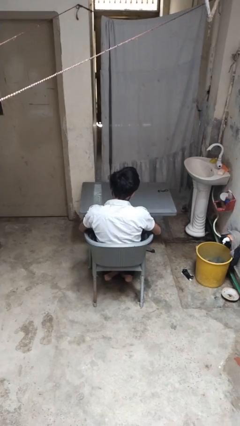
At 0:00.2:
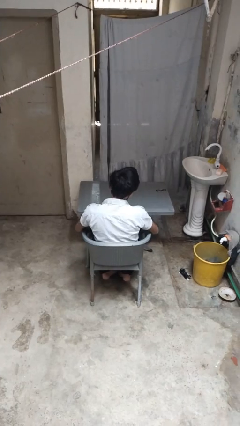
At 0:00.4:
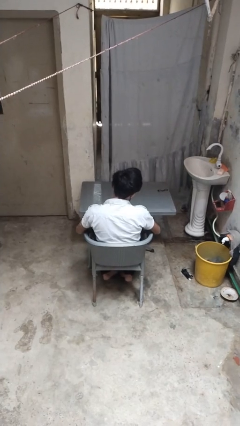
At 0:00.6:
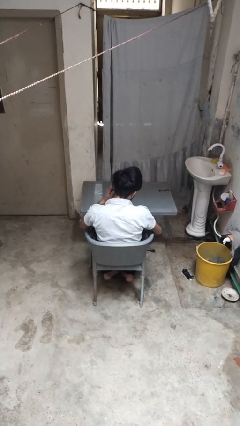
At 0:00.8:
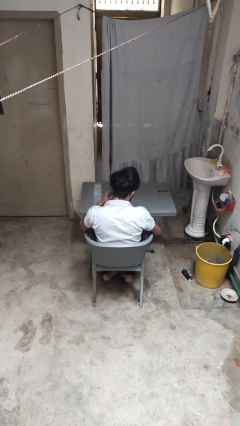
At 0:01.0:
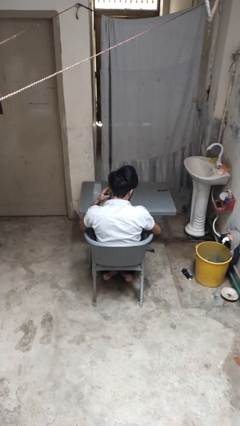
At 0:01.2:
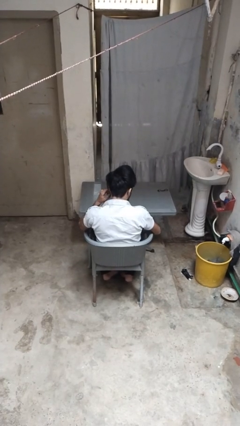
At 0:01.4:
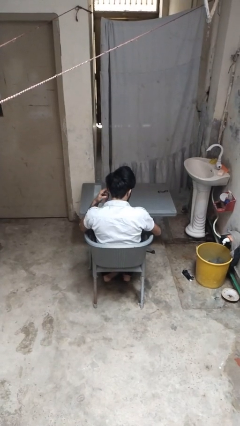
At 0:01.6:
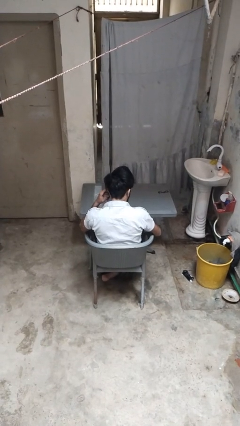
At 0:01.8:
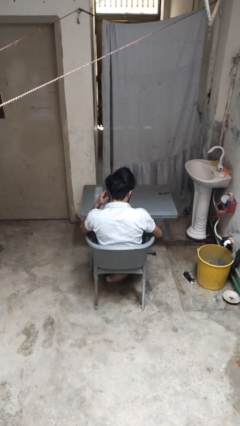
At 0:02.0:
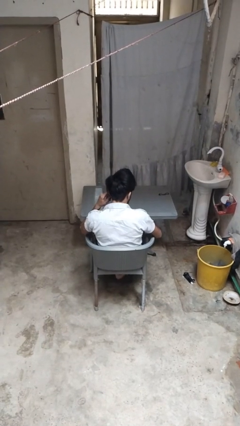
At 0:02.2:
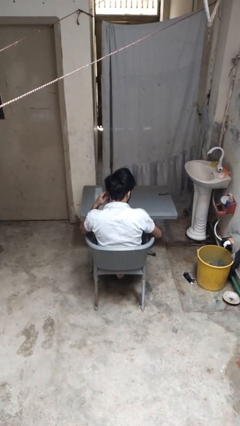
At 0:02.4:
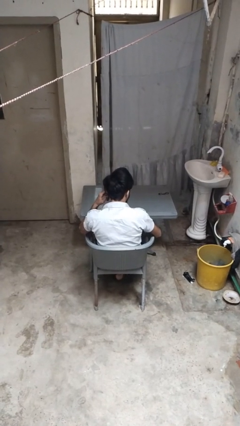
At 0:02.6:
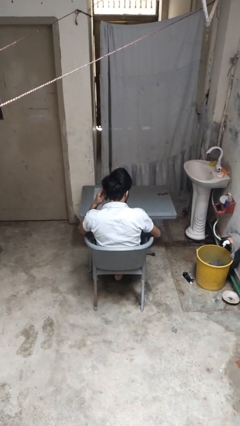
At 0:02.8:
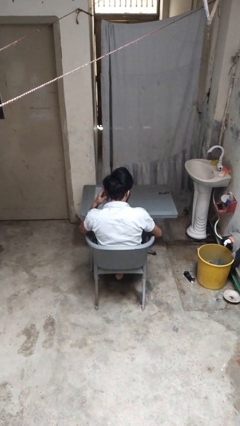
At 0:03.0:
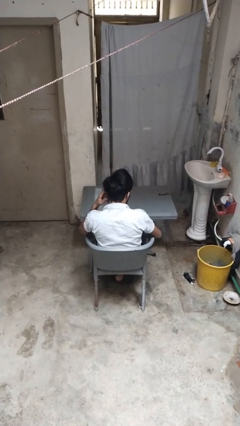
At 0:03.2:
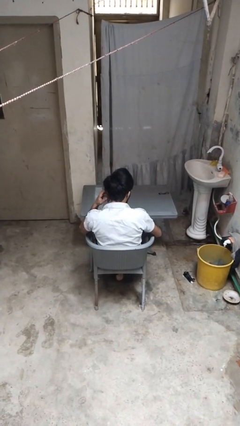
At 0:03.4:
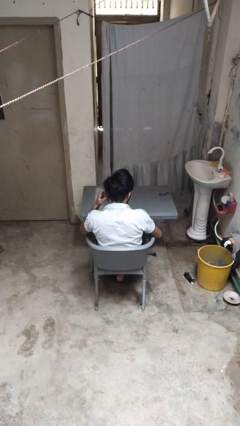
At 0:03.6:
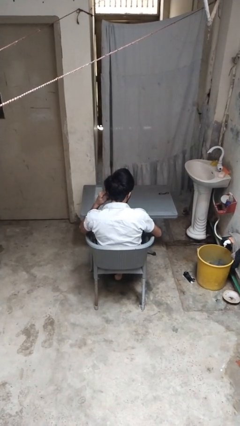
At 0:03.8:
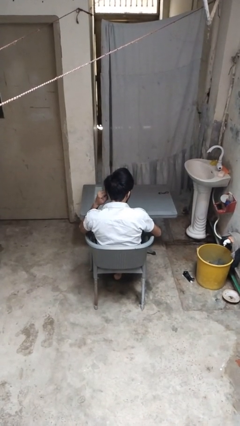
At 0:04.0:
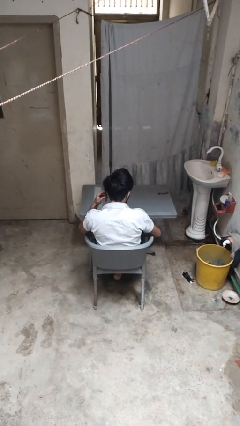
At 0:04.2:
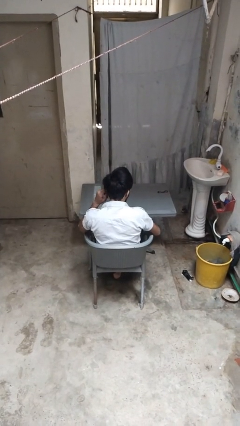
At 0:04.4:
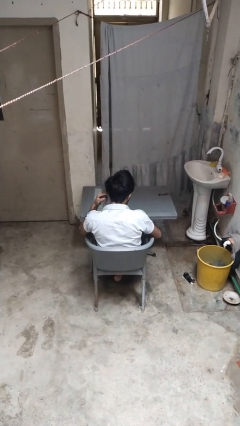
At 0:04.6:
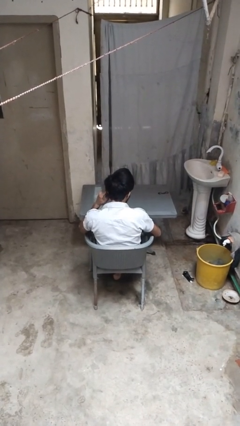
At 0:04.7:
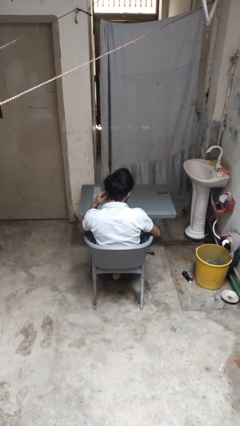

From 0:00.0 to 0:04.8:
person puts fingers in ear

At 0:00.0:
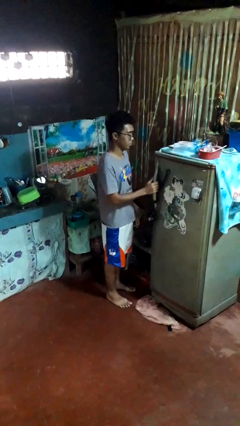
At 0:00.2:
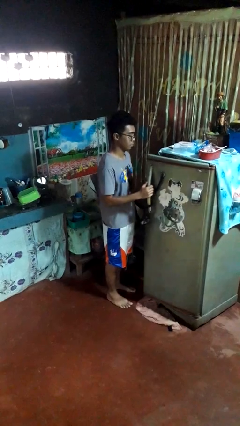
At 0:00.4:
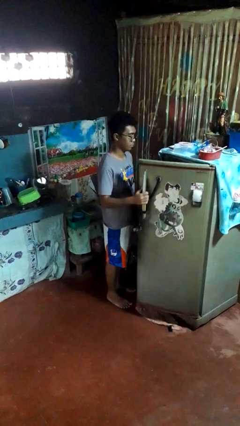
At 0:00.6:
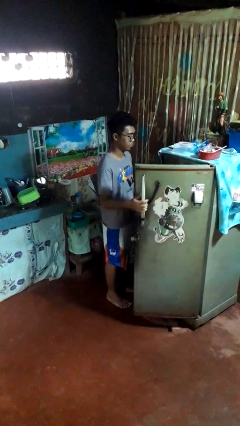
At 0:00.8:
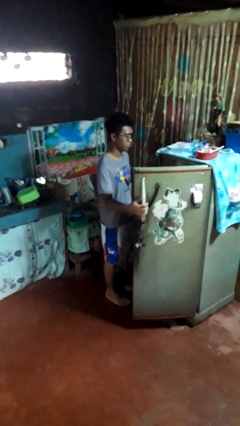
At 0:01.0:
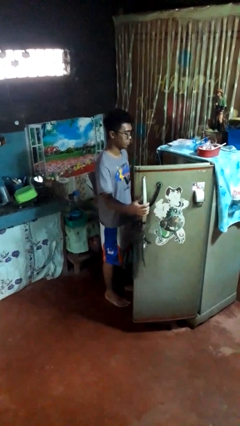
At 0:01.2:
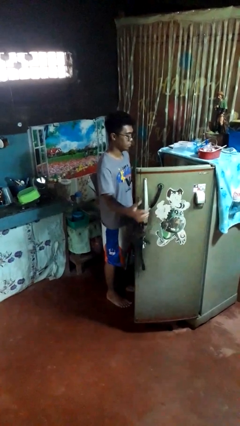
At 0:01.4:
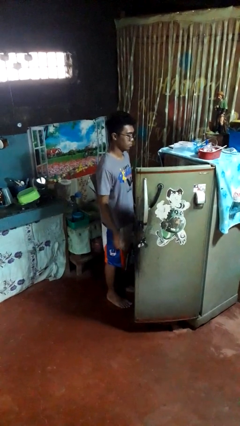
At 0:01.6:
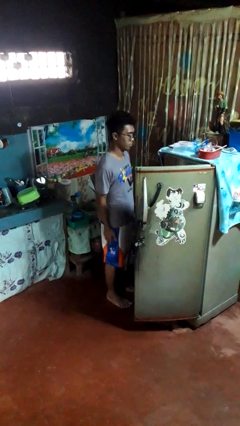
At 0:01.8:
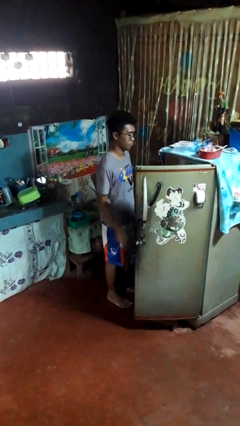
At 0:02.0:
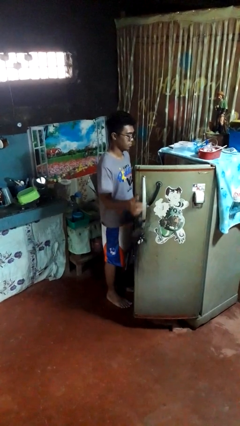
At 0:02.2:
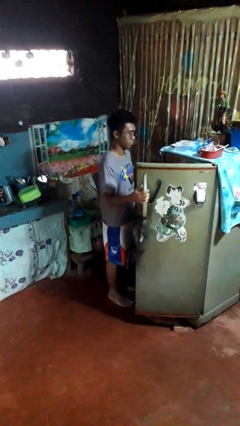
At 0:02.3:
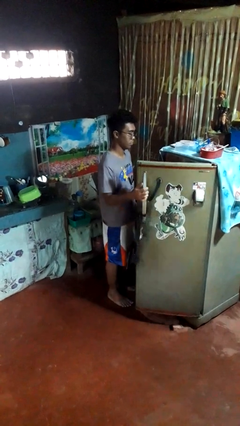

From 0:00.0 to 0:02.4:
person opens refrigerator

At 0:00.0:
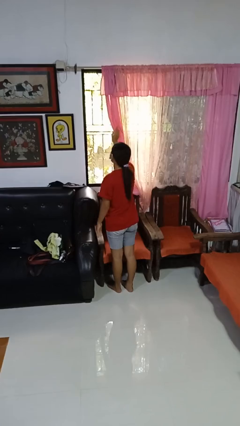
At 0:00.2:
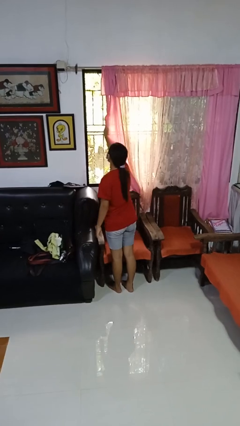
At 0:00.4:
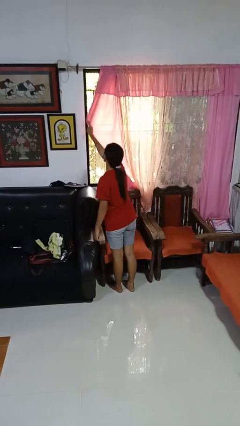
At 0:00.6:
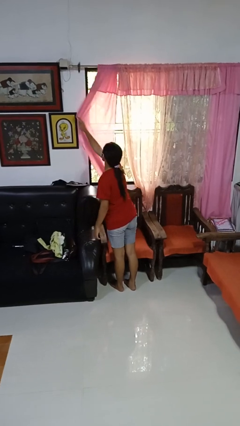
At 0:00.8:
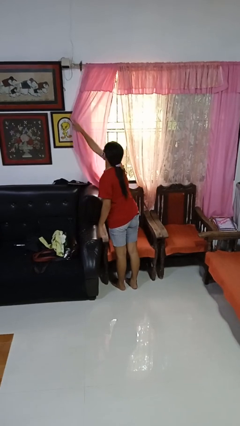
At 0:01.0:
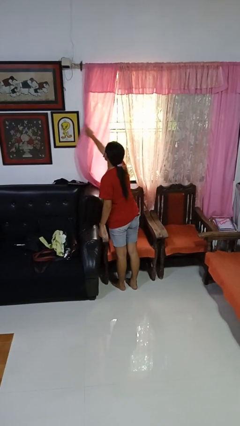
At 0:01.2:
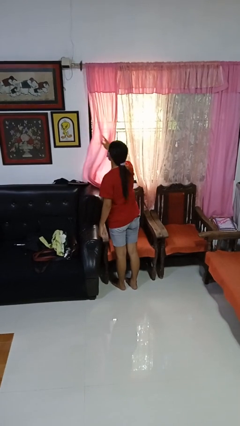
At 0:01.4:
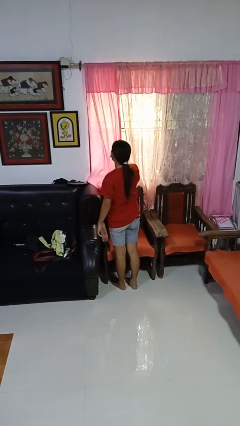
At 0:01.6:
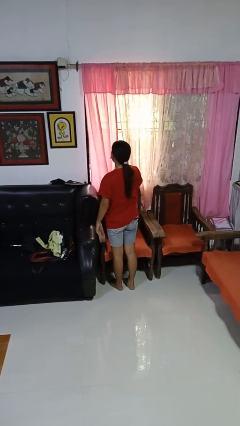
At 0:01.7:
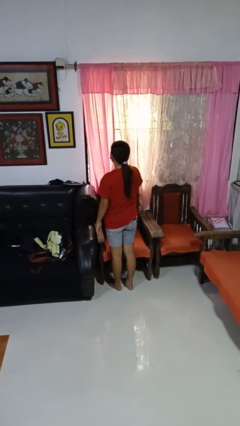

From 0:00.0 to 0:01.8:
person closes curtains

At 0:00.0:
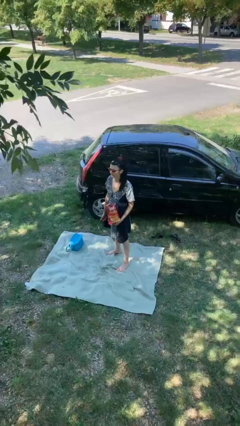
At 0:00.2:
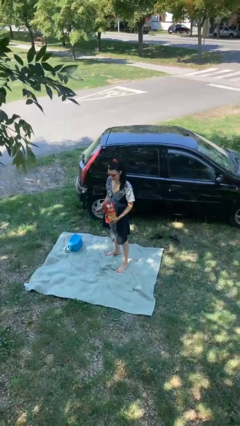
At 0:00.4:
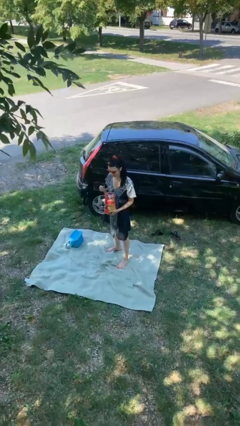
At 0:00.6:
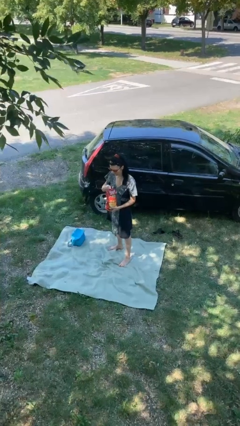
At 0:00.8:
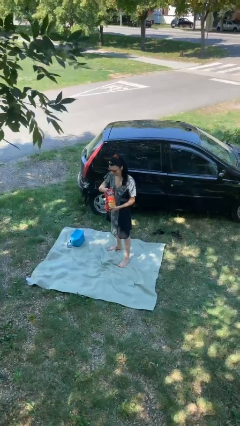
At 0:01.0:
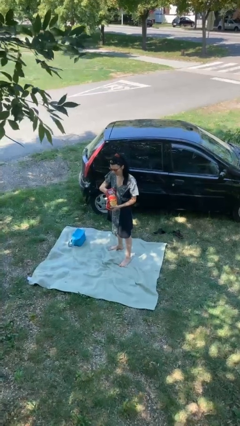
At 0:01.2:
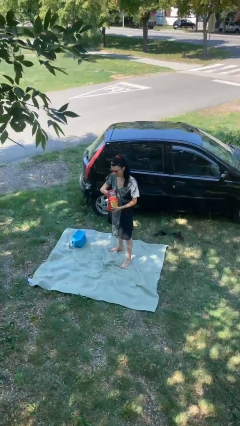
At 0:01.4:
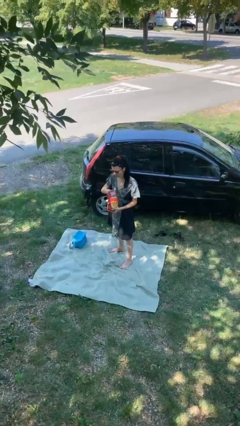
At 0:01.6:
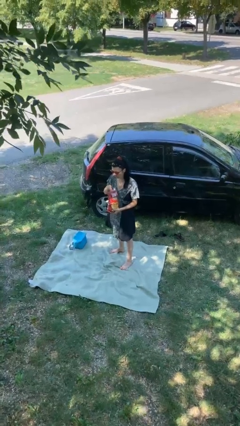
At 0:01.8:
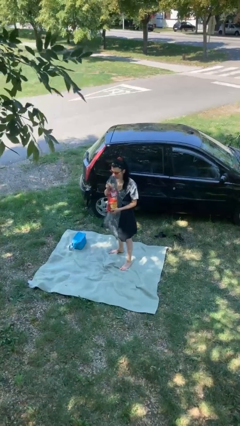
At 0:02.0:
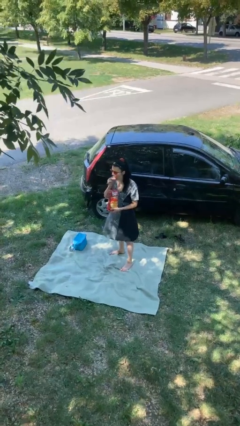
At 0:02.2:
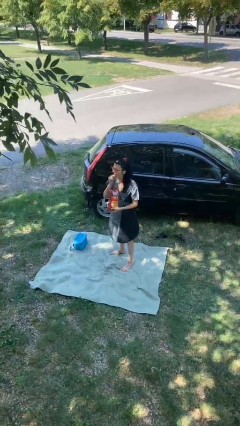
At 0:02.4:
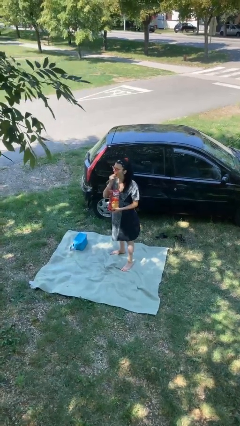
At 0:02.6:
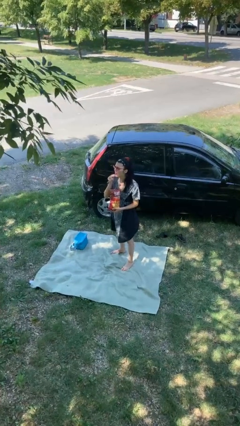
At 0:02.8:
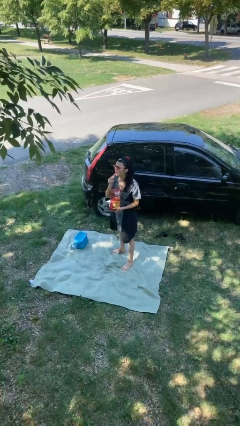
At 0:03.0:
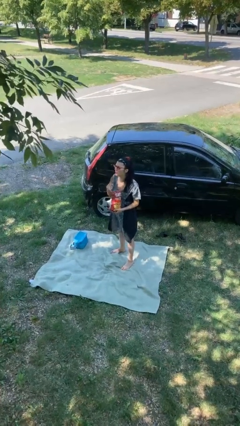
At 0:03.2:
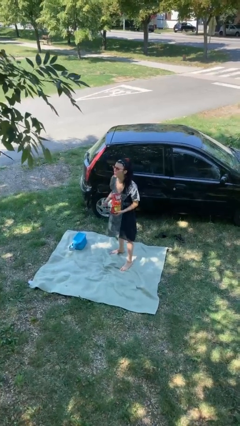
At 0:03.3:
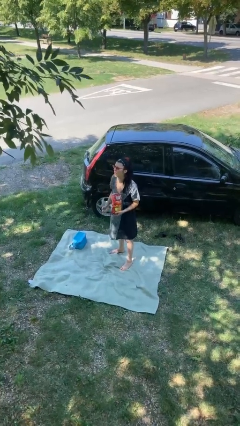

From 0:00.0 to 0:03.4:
person eats snack from bag

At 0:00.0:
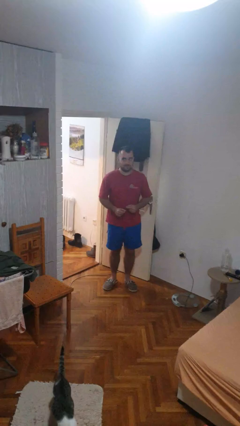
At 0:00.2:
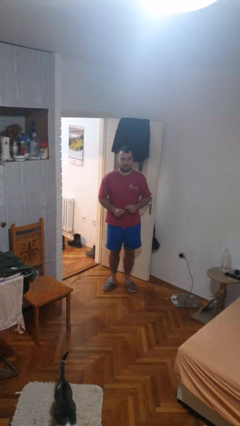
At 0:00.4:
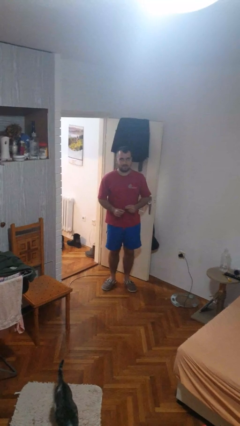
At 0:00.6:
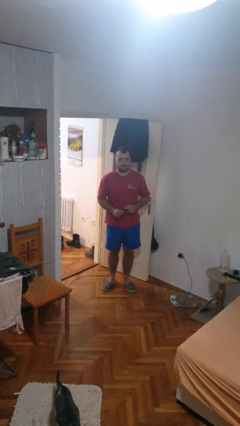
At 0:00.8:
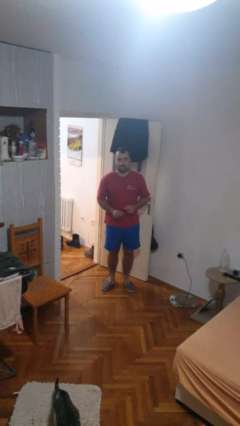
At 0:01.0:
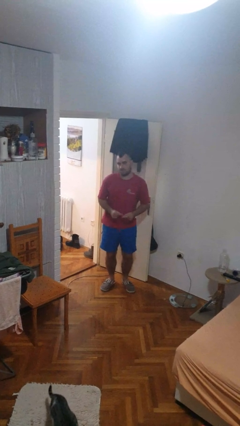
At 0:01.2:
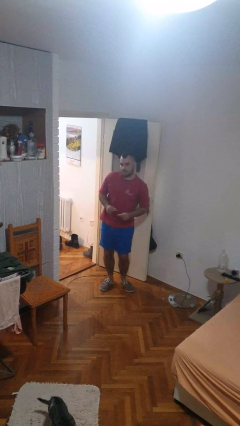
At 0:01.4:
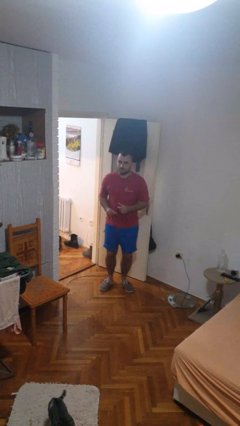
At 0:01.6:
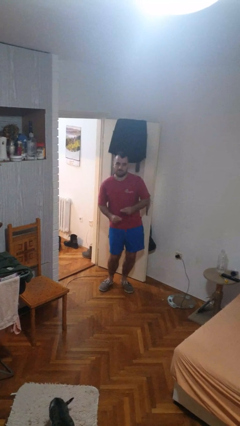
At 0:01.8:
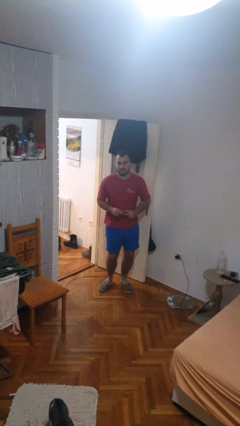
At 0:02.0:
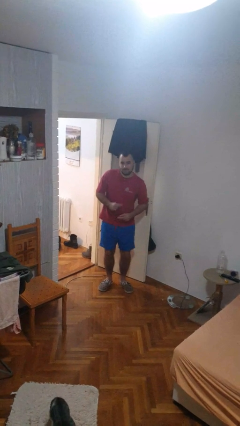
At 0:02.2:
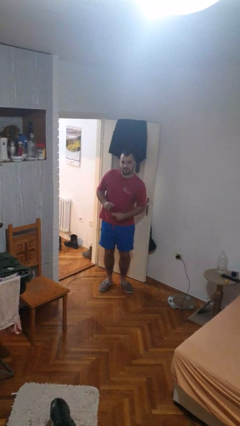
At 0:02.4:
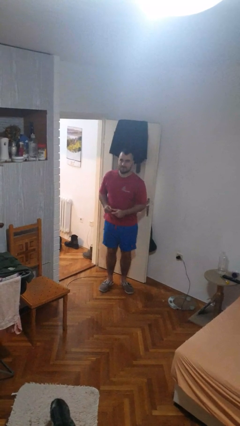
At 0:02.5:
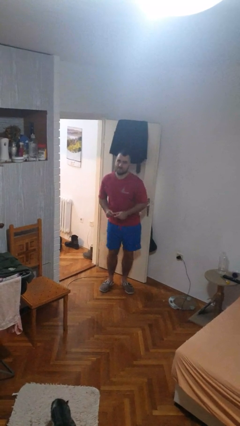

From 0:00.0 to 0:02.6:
person dances in place

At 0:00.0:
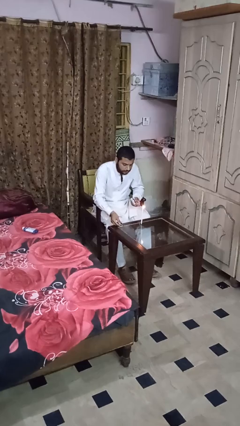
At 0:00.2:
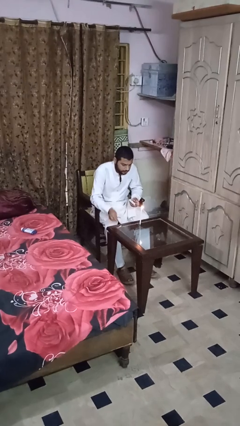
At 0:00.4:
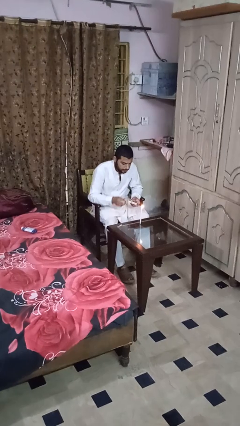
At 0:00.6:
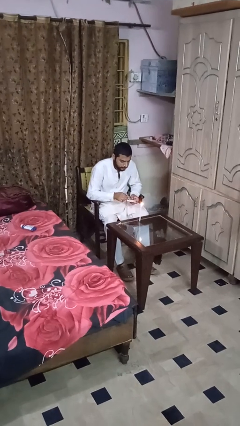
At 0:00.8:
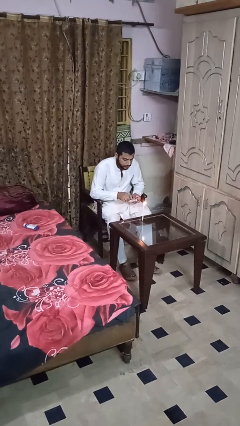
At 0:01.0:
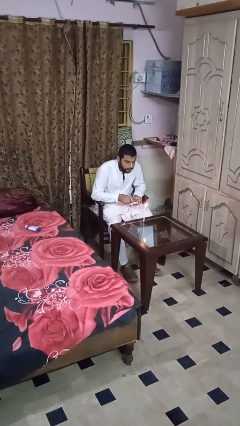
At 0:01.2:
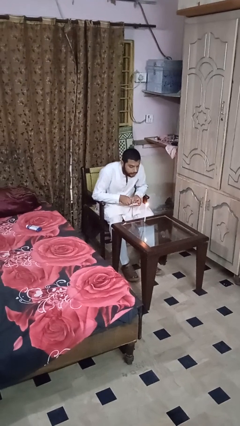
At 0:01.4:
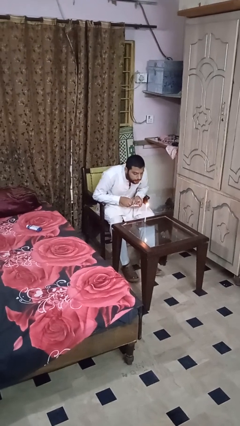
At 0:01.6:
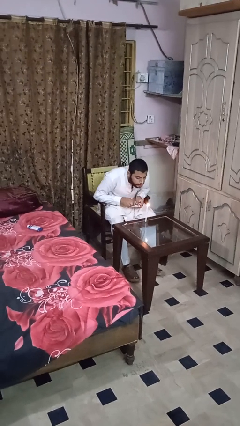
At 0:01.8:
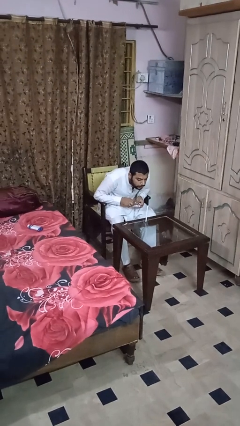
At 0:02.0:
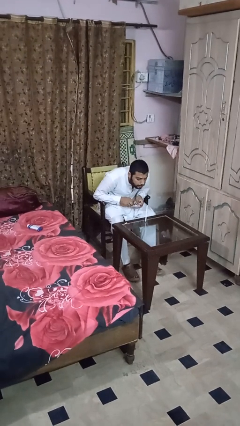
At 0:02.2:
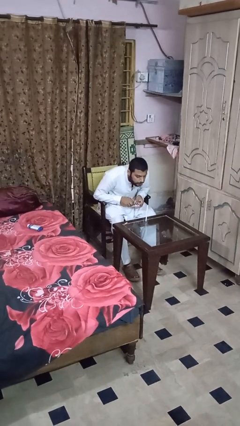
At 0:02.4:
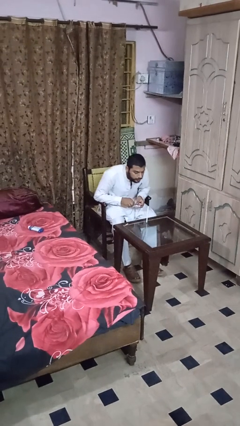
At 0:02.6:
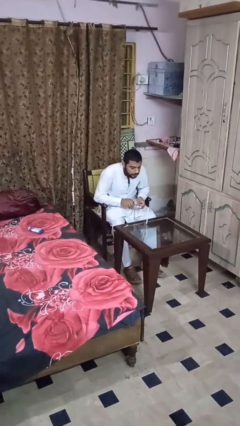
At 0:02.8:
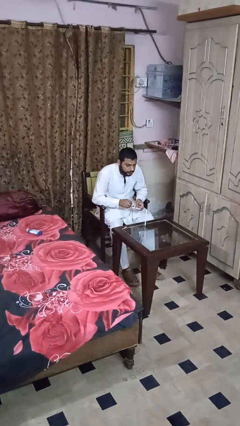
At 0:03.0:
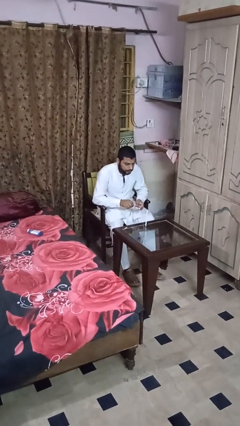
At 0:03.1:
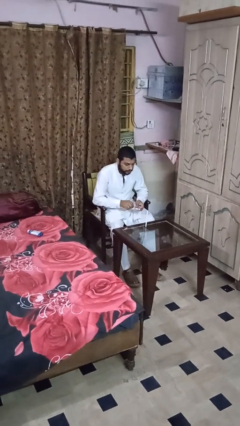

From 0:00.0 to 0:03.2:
person extinguishes candle
